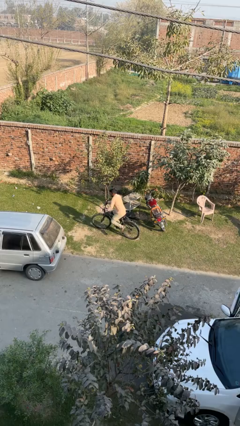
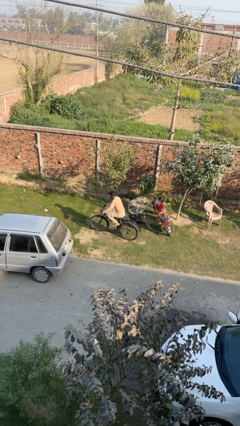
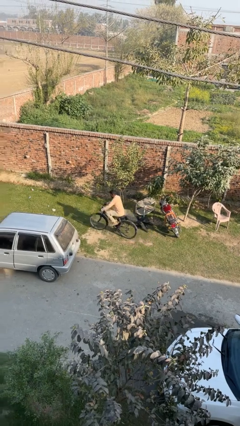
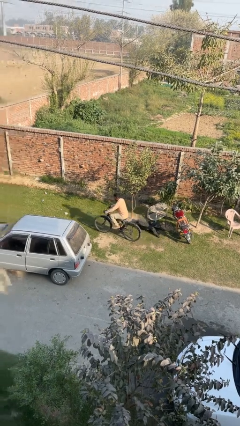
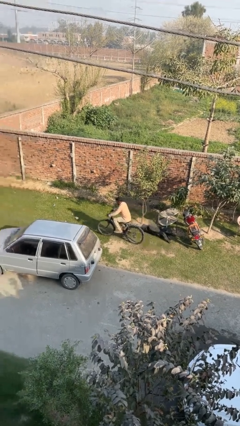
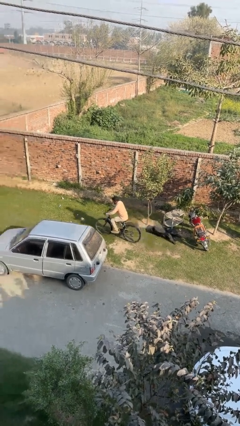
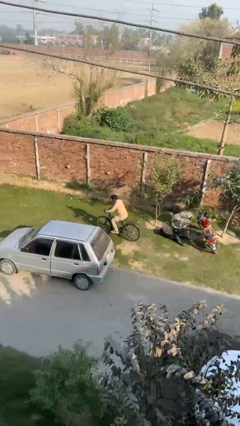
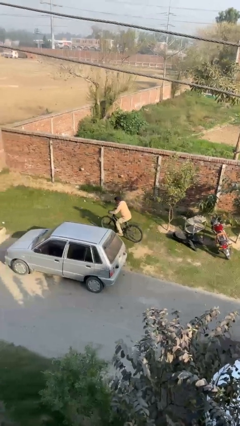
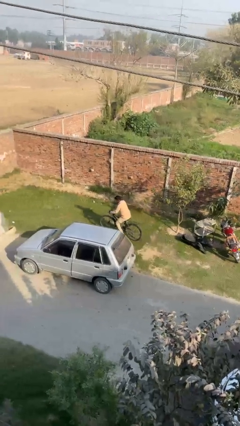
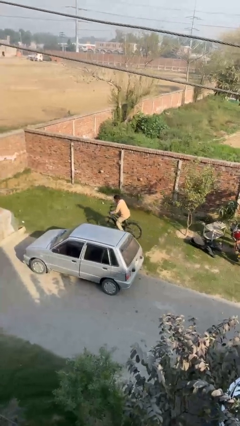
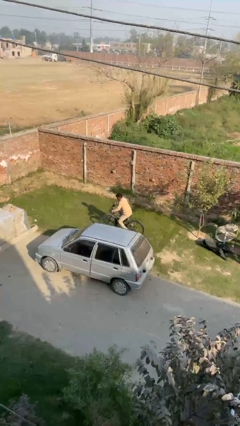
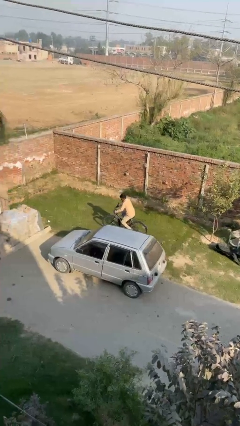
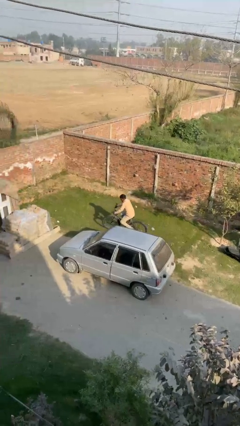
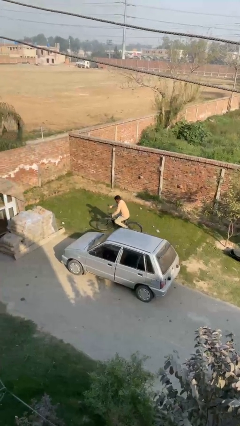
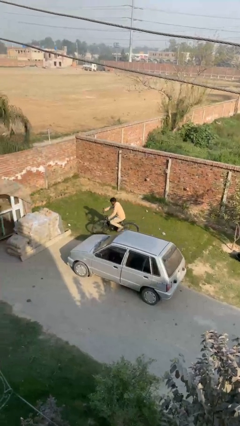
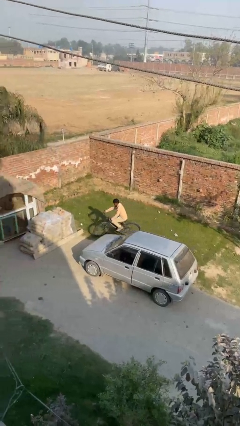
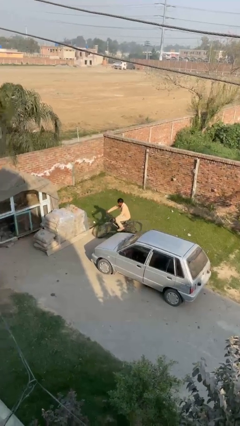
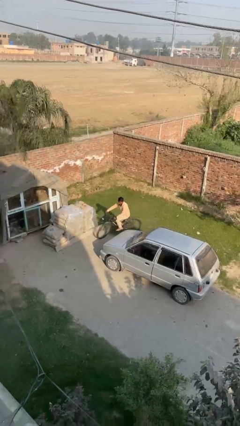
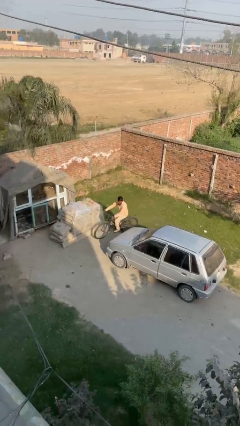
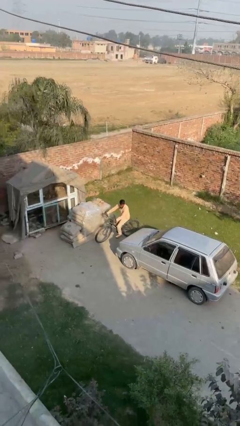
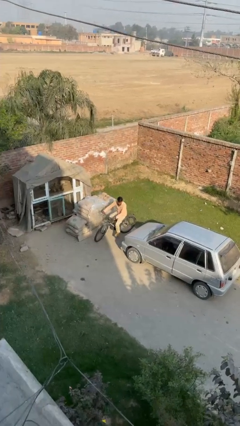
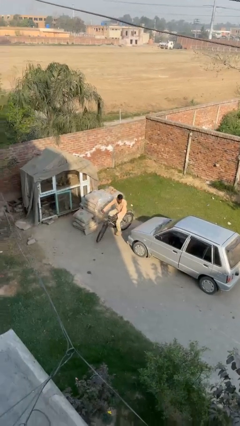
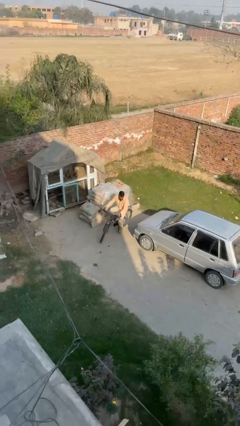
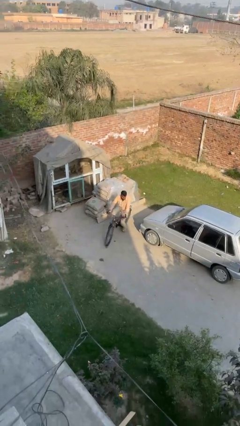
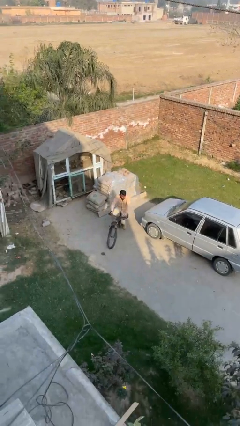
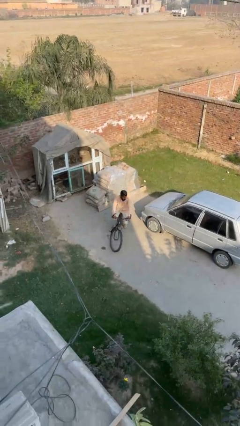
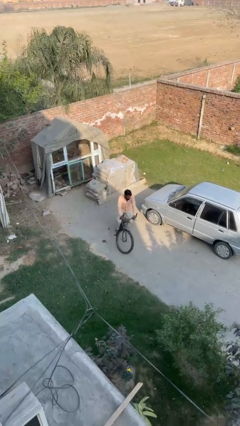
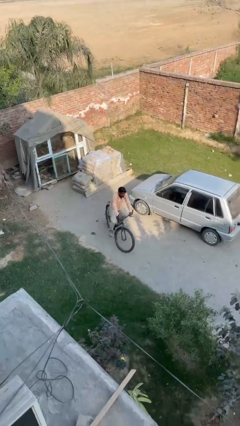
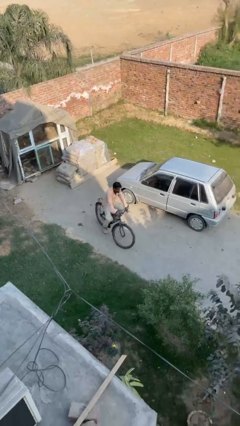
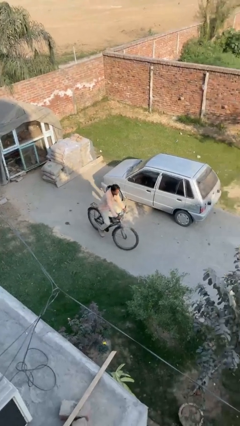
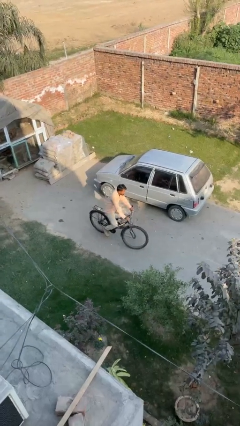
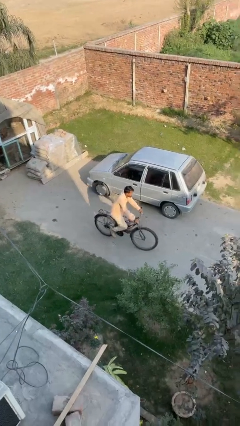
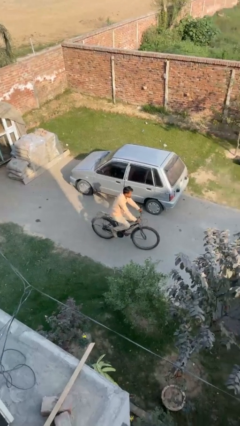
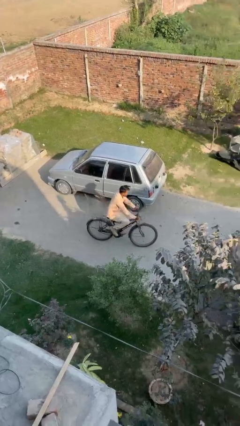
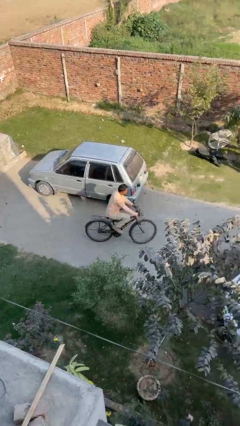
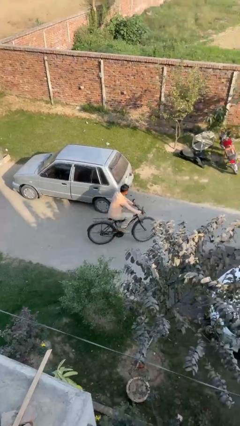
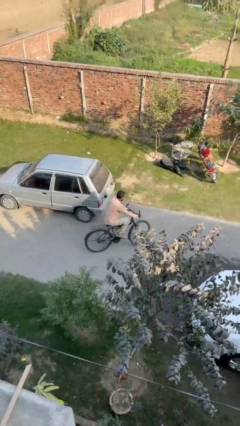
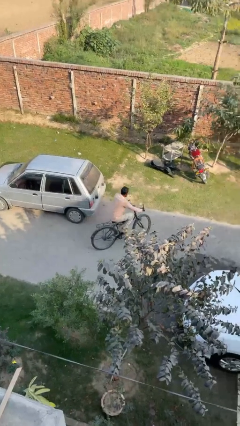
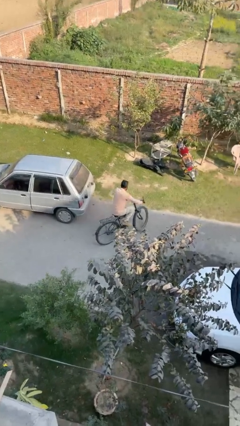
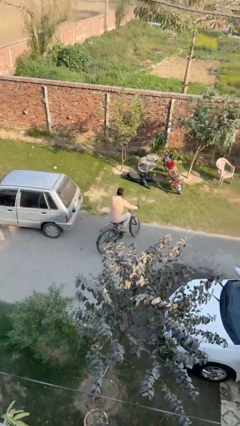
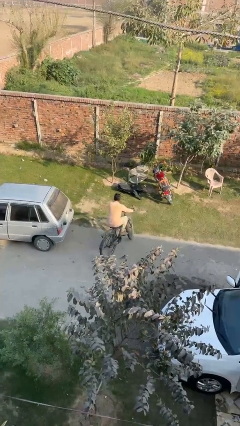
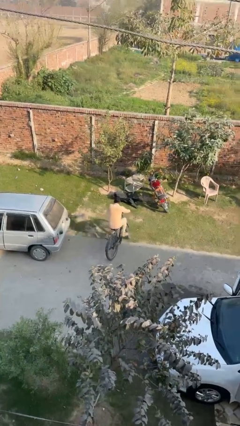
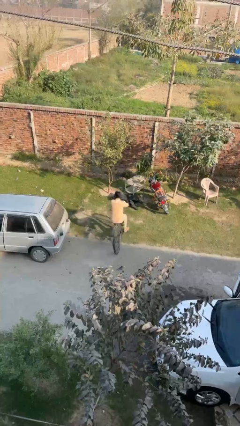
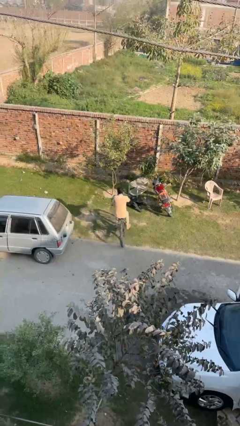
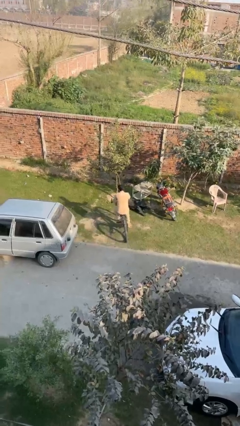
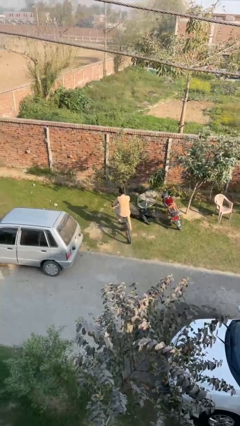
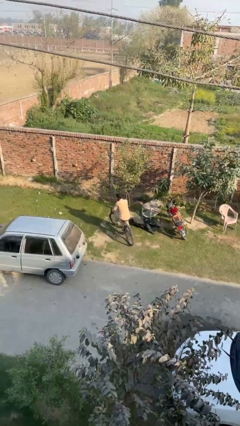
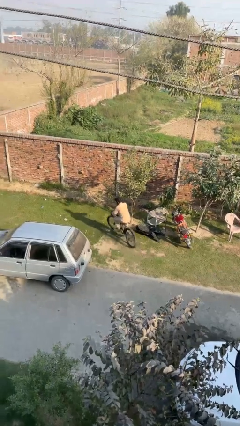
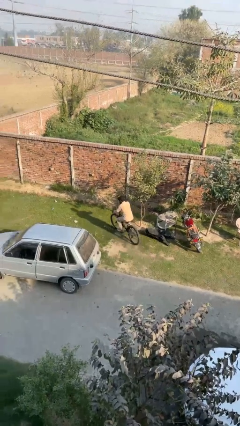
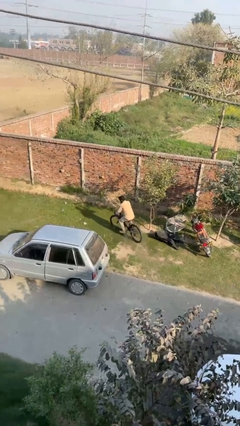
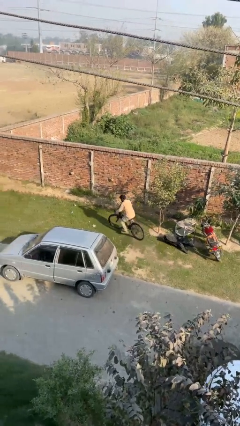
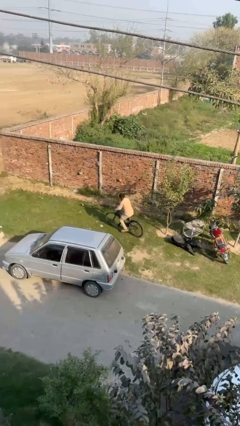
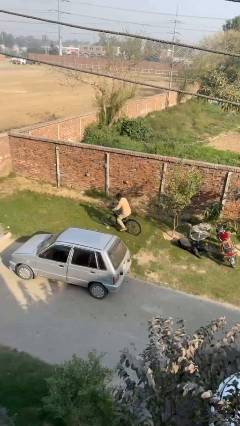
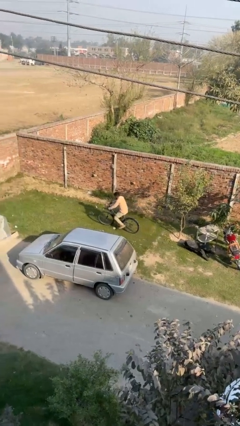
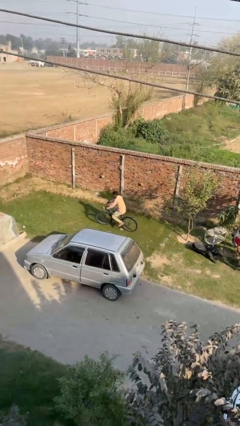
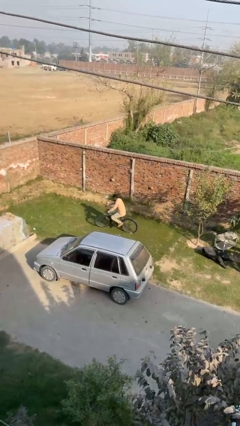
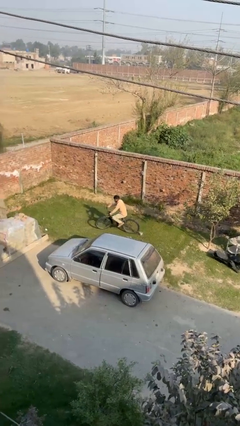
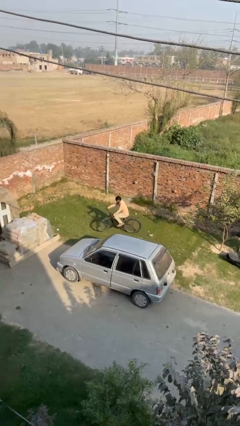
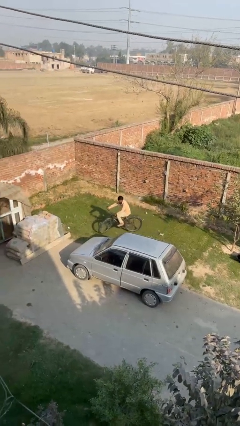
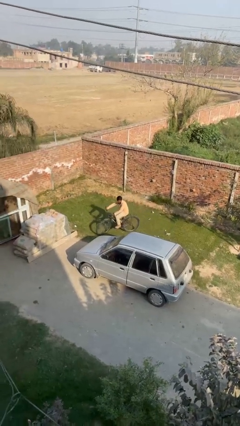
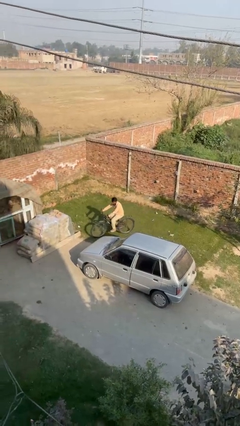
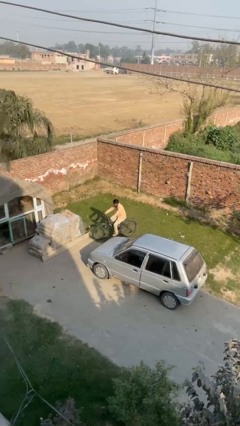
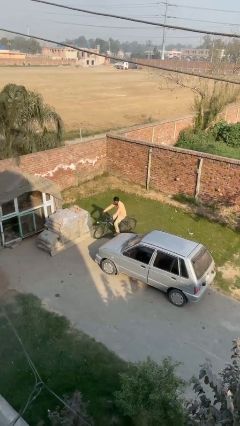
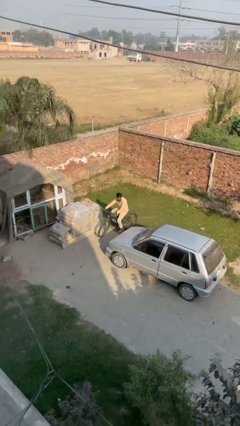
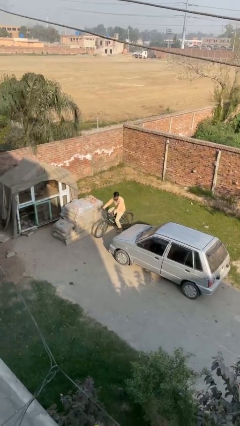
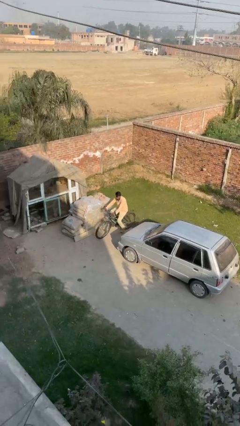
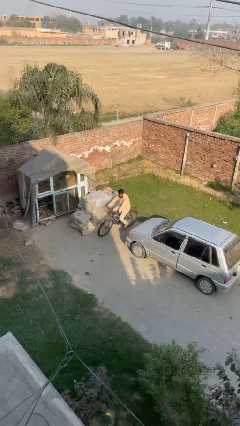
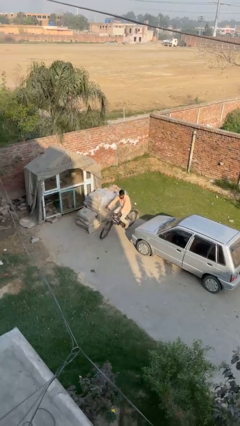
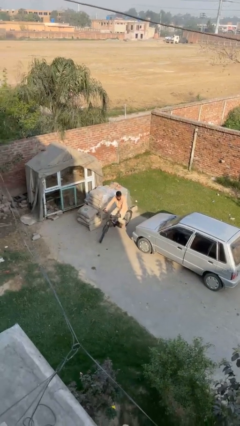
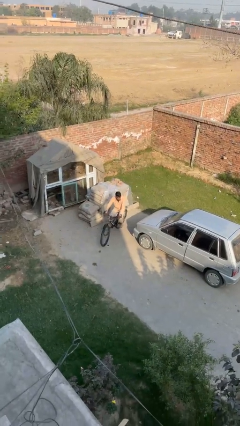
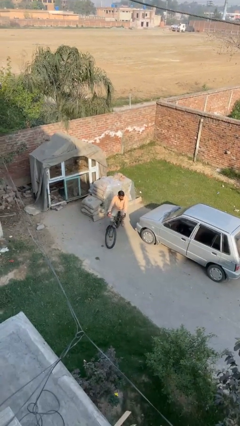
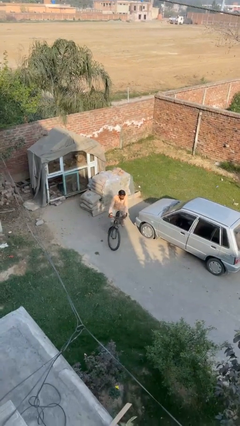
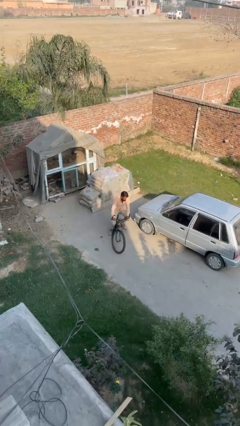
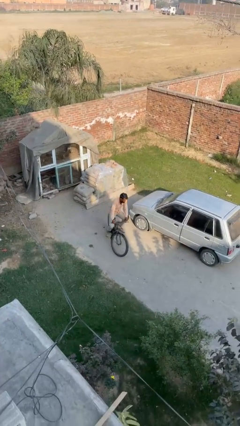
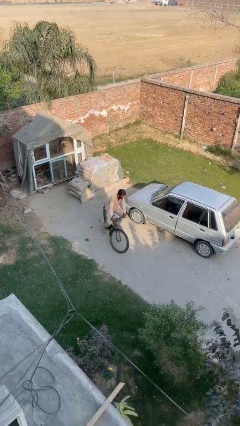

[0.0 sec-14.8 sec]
person rides bicycle

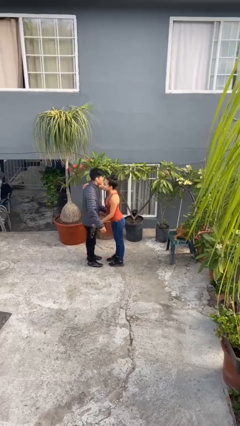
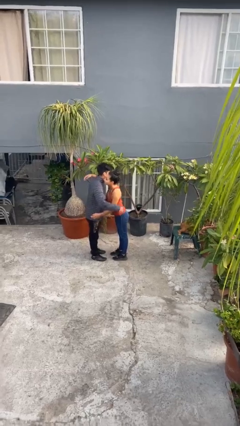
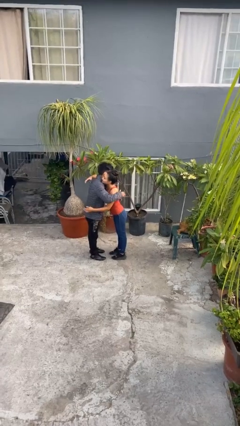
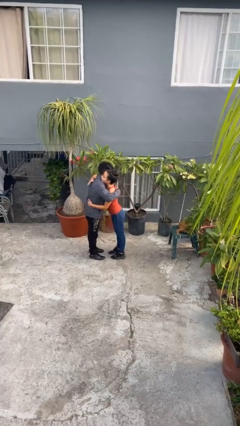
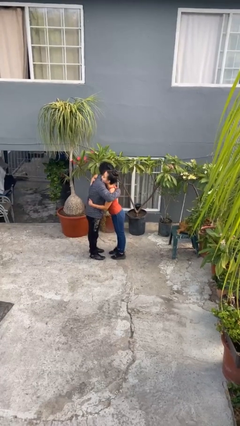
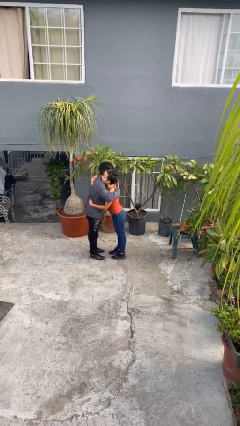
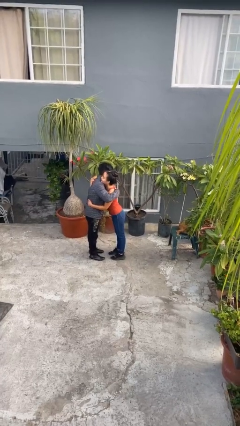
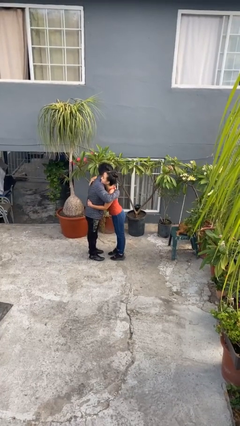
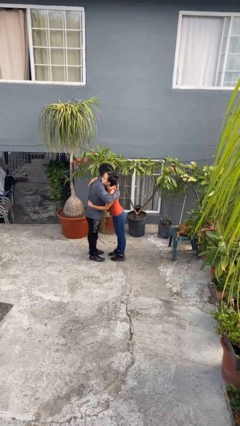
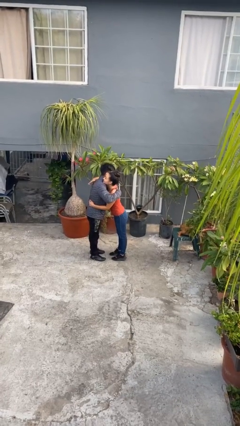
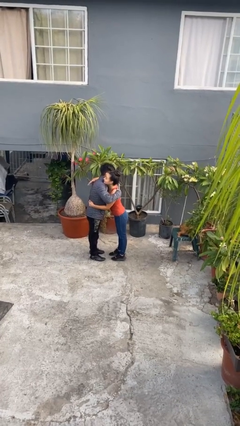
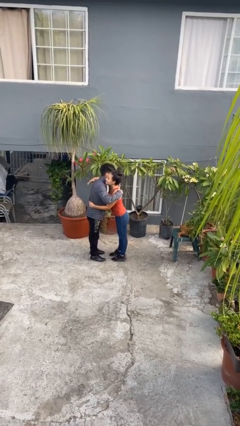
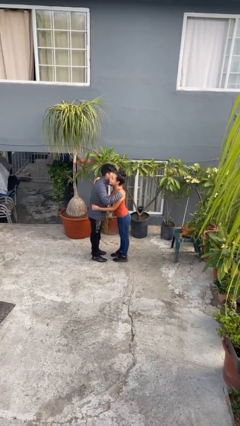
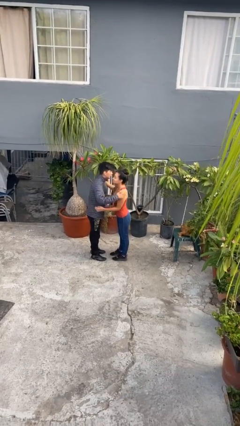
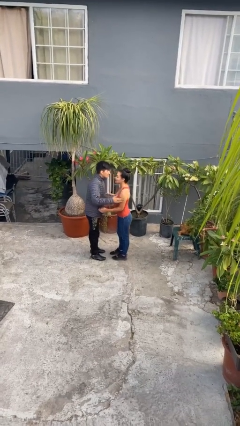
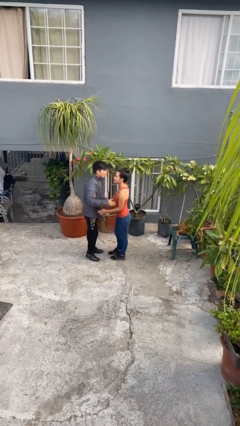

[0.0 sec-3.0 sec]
person embraces person

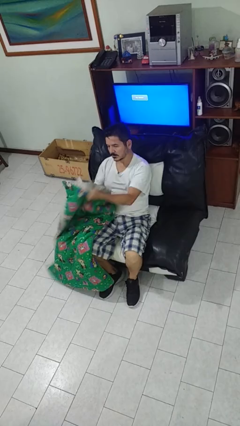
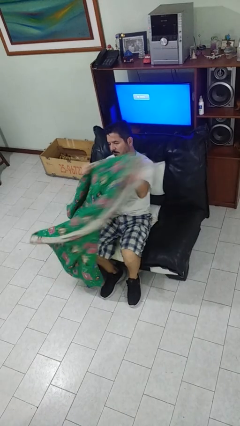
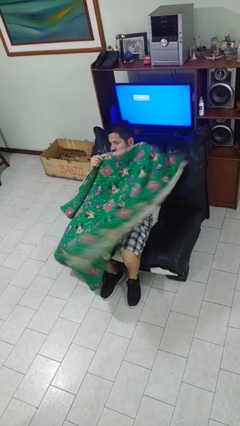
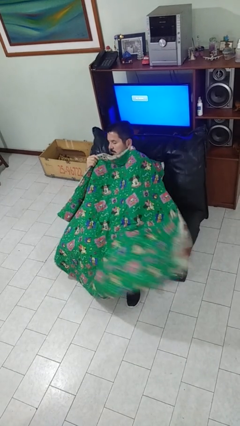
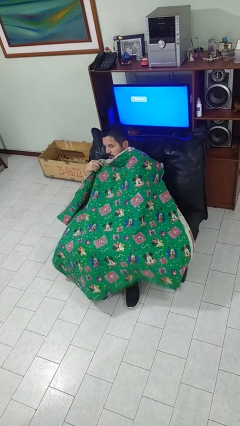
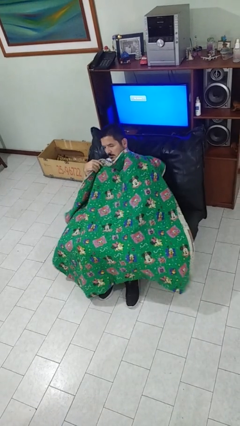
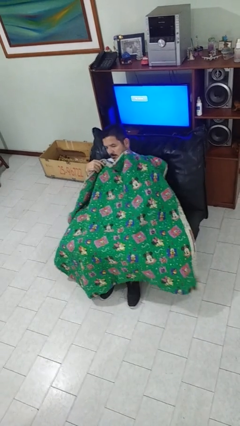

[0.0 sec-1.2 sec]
person covers with blanket
